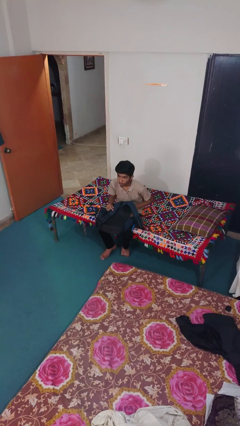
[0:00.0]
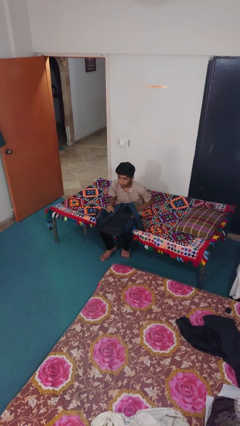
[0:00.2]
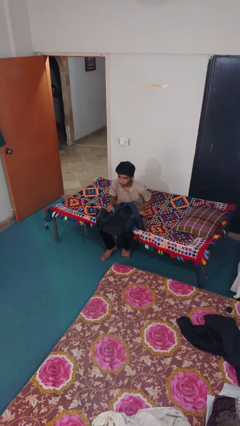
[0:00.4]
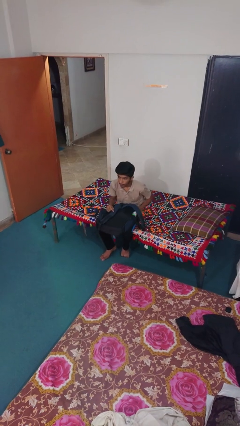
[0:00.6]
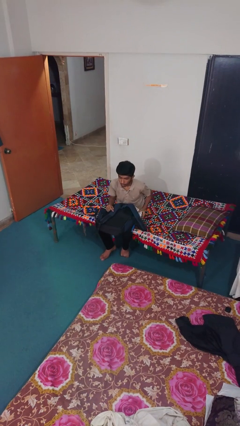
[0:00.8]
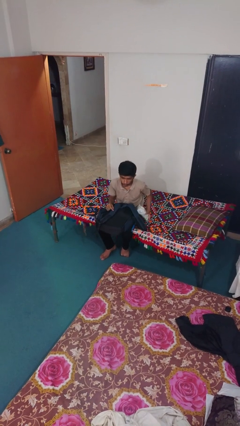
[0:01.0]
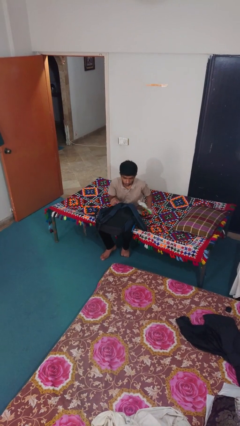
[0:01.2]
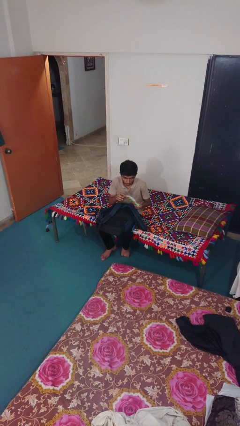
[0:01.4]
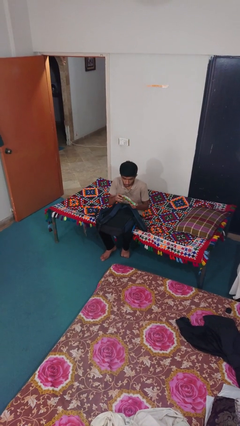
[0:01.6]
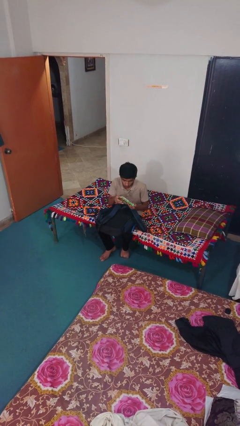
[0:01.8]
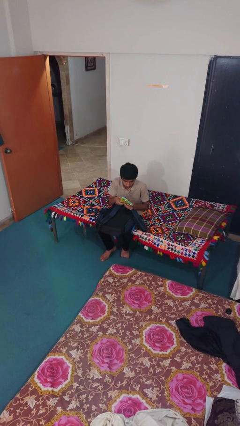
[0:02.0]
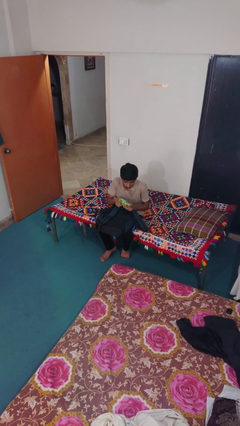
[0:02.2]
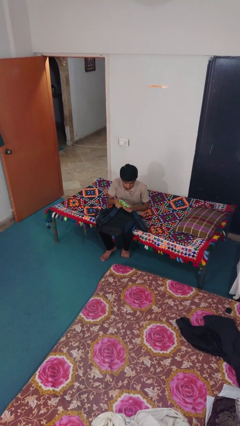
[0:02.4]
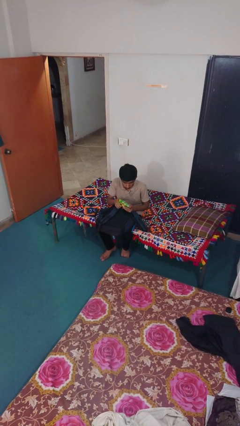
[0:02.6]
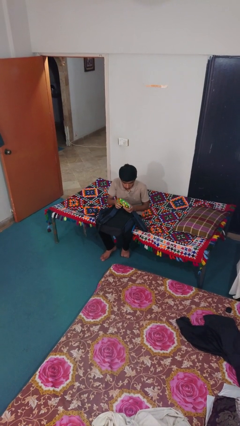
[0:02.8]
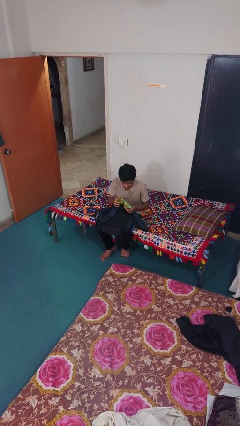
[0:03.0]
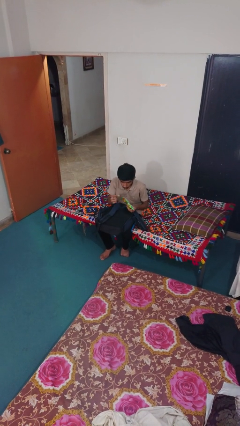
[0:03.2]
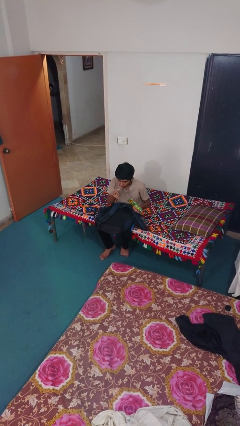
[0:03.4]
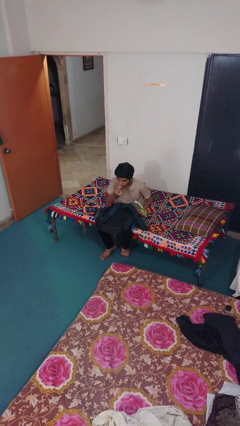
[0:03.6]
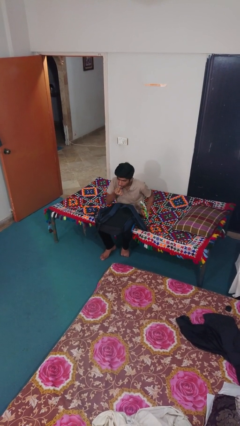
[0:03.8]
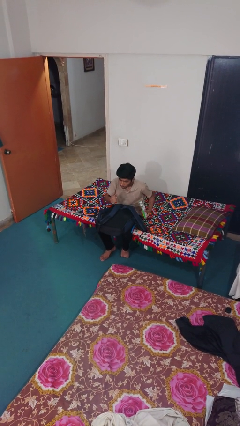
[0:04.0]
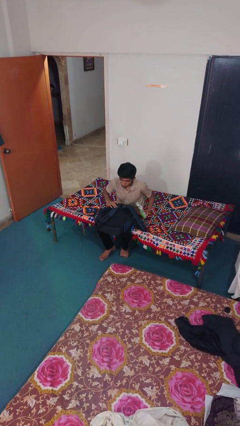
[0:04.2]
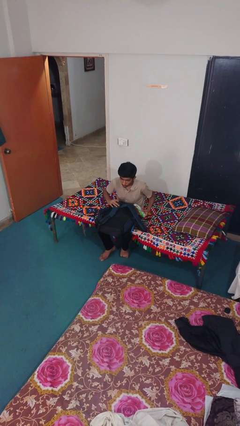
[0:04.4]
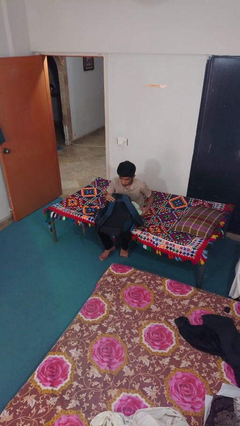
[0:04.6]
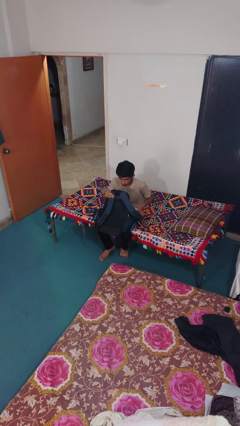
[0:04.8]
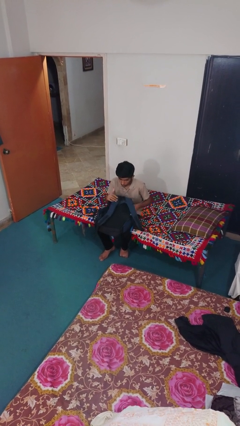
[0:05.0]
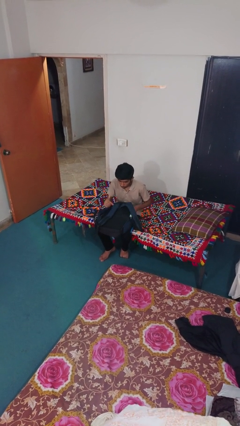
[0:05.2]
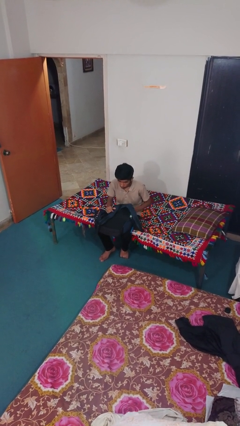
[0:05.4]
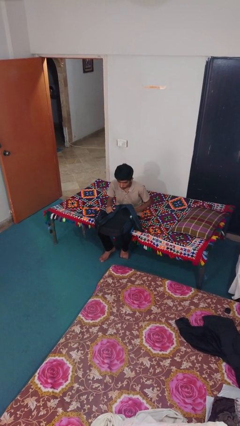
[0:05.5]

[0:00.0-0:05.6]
person eats snack from bag

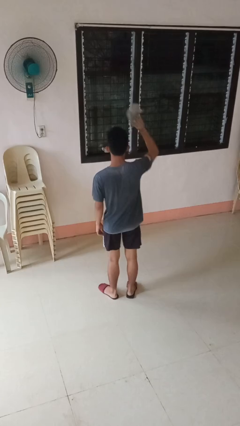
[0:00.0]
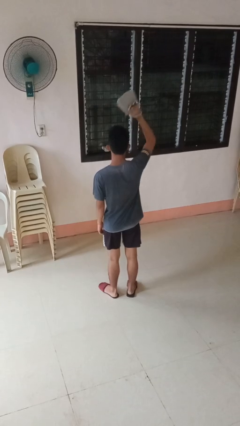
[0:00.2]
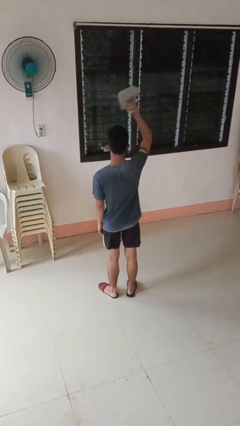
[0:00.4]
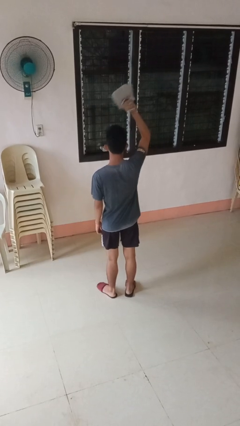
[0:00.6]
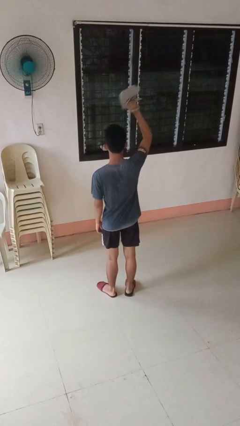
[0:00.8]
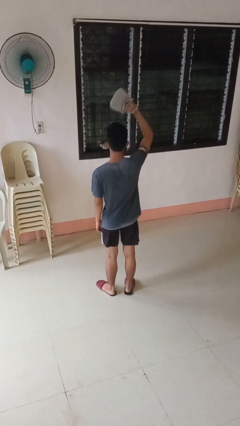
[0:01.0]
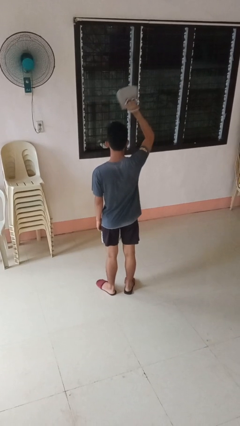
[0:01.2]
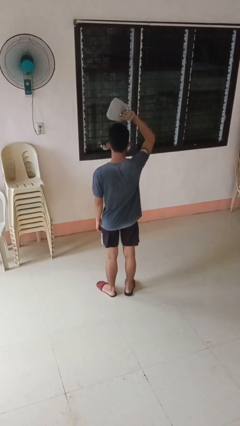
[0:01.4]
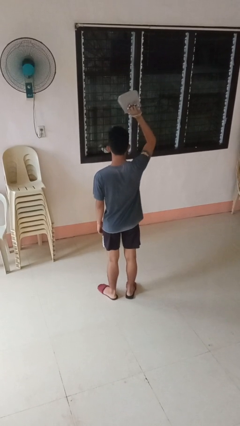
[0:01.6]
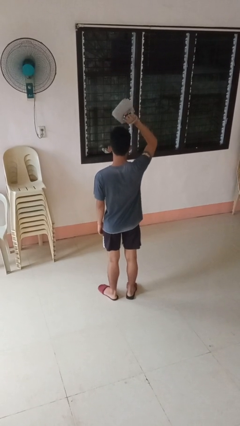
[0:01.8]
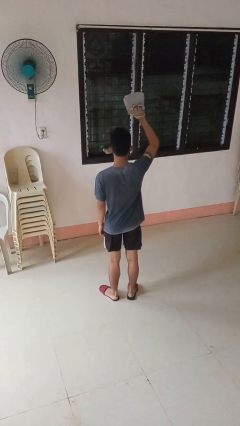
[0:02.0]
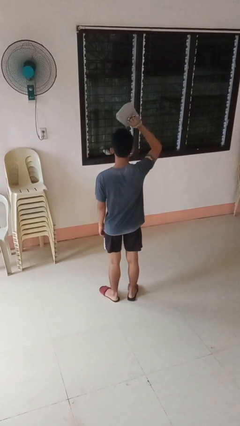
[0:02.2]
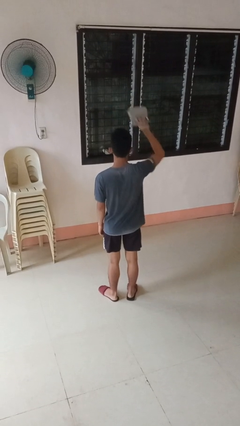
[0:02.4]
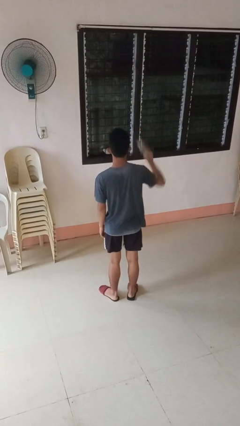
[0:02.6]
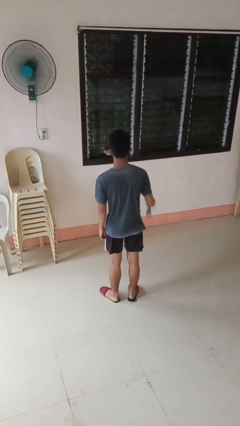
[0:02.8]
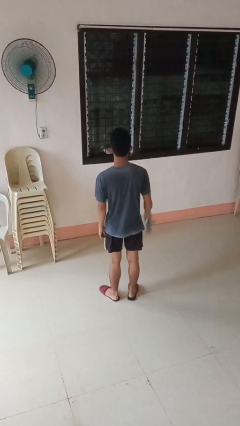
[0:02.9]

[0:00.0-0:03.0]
person holds object above head

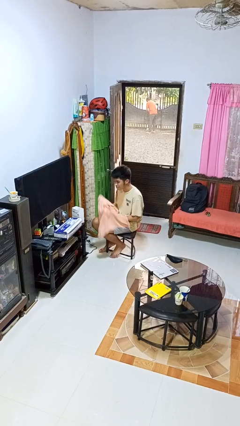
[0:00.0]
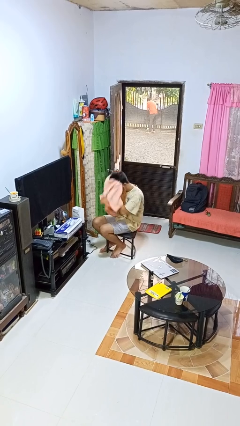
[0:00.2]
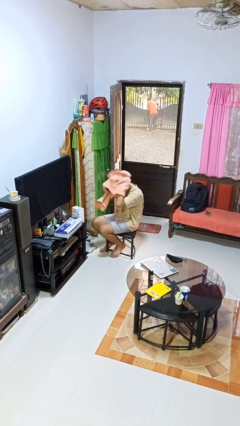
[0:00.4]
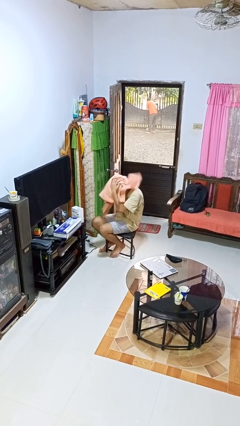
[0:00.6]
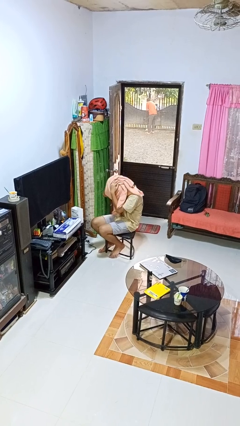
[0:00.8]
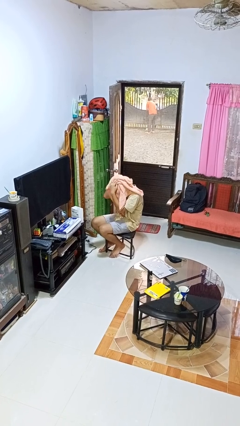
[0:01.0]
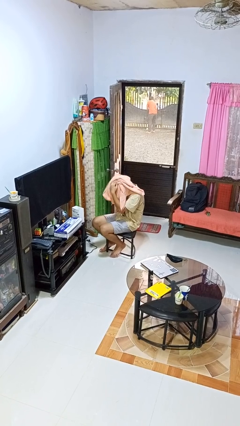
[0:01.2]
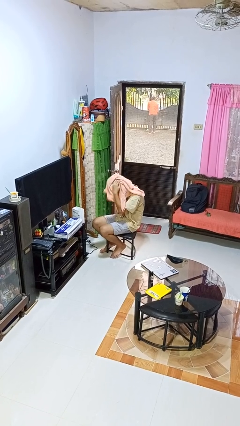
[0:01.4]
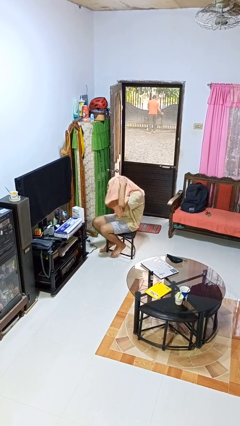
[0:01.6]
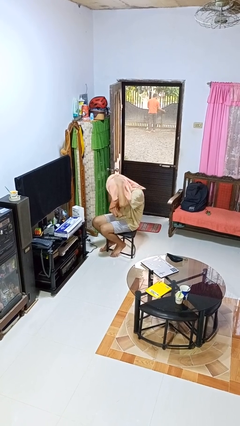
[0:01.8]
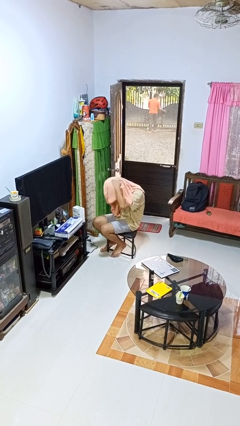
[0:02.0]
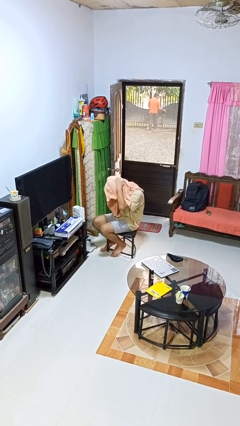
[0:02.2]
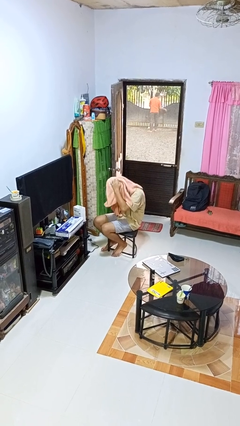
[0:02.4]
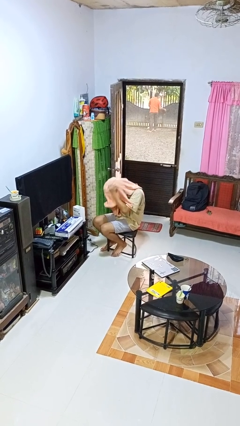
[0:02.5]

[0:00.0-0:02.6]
person dries hair with towel

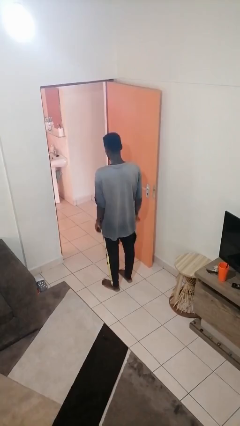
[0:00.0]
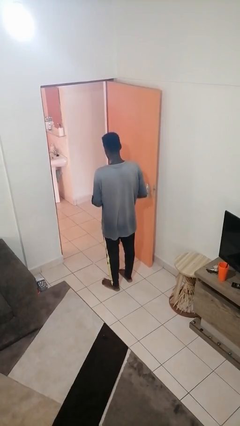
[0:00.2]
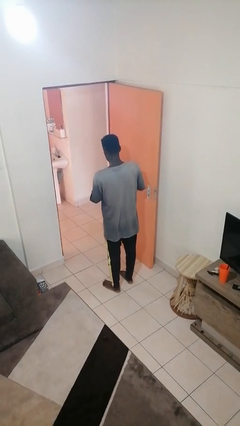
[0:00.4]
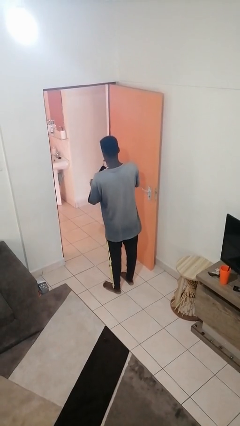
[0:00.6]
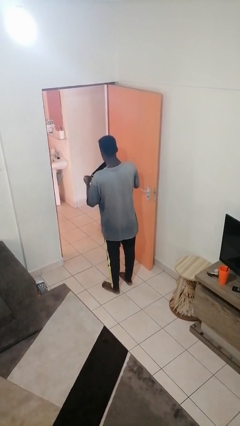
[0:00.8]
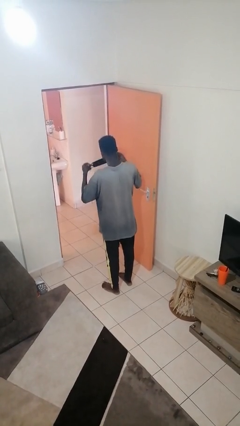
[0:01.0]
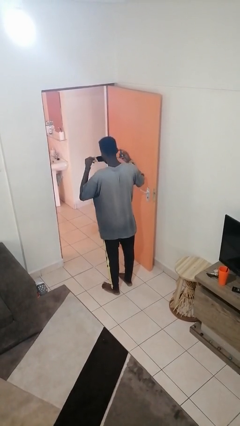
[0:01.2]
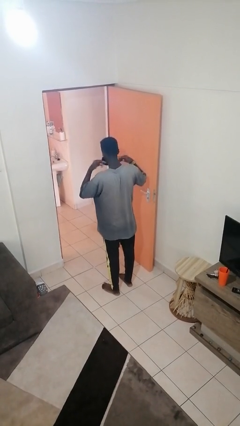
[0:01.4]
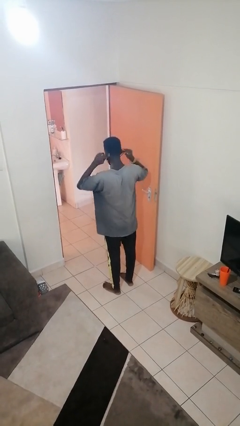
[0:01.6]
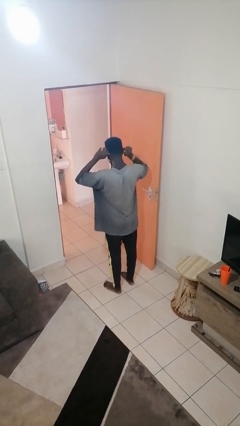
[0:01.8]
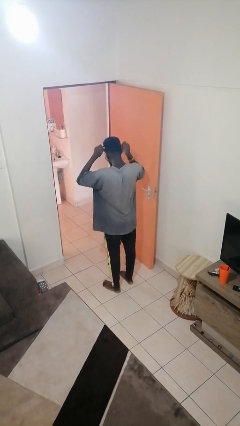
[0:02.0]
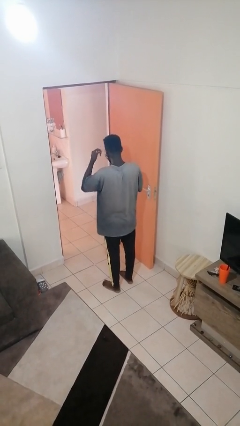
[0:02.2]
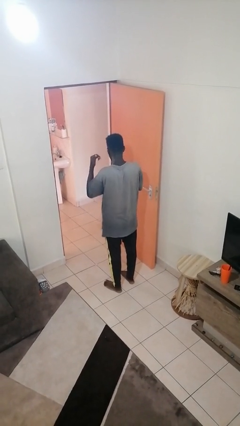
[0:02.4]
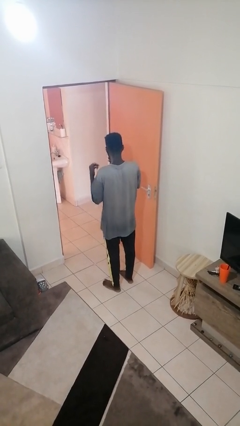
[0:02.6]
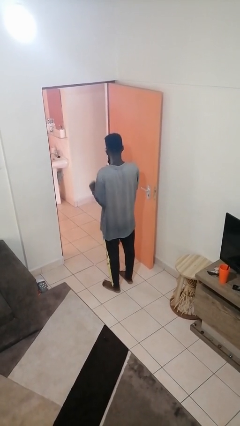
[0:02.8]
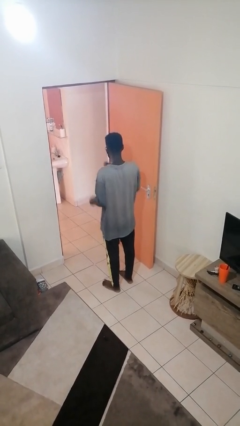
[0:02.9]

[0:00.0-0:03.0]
person puts on facemask

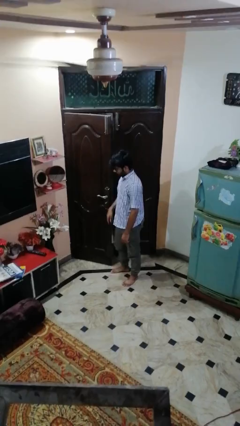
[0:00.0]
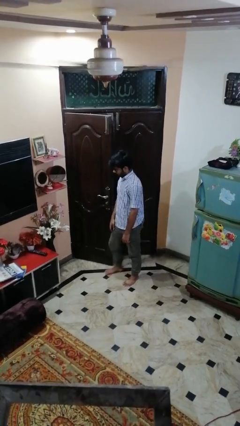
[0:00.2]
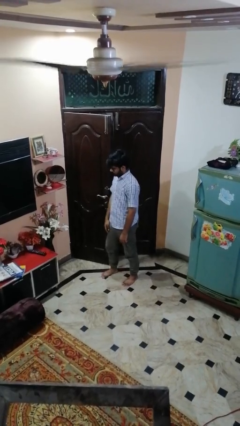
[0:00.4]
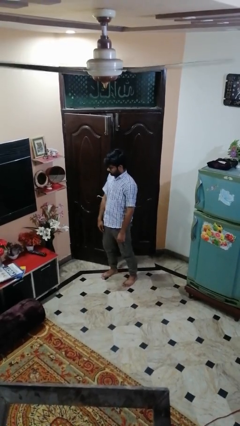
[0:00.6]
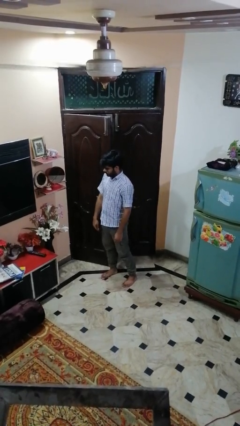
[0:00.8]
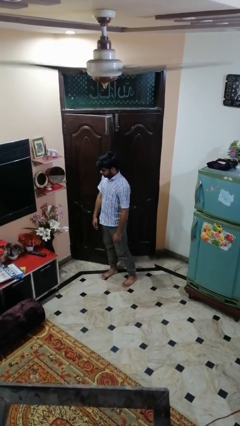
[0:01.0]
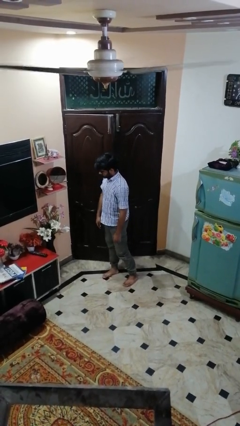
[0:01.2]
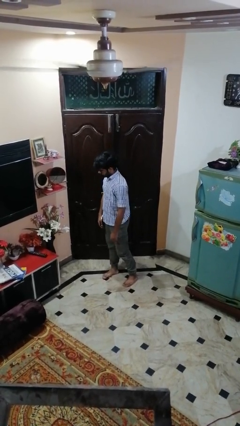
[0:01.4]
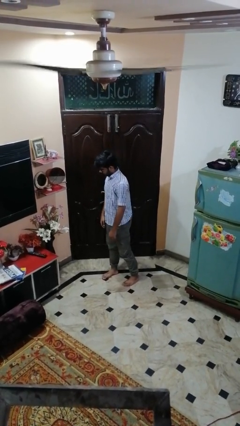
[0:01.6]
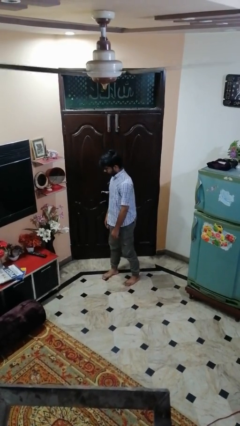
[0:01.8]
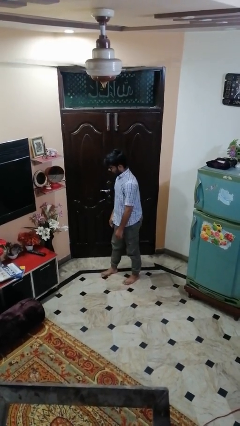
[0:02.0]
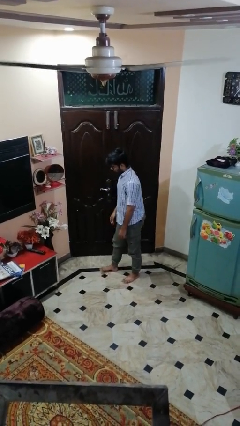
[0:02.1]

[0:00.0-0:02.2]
person closes door with hip

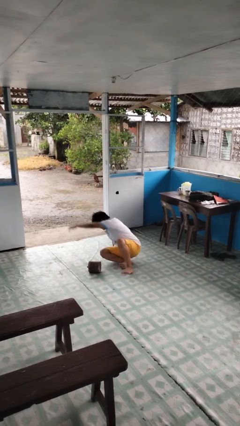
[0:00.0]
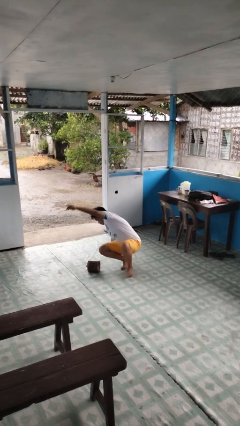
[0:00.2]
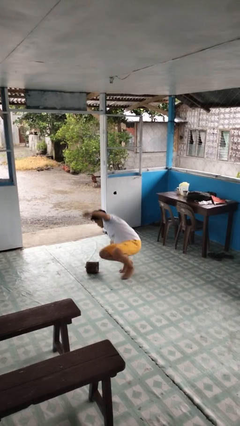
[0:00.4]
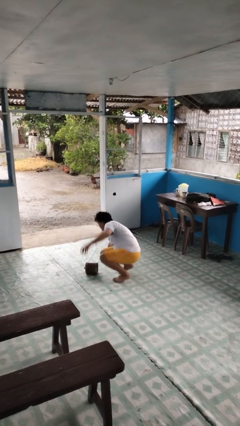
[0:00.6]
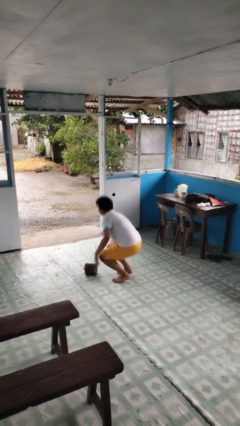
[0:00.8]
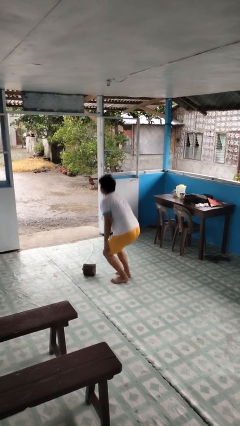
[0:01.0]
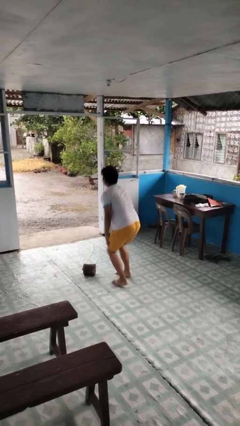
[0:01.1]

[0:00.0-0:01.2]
person stands up from floor
